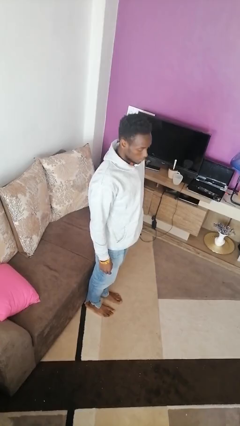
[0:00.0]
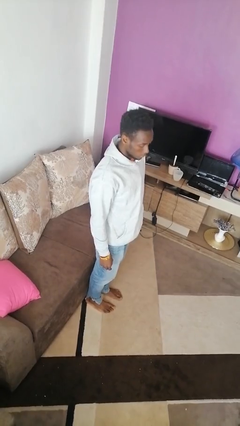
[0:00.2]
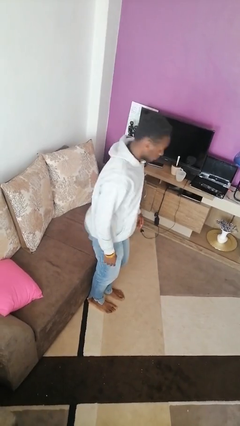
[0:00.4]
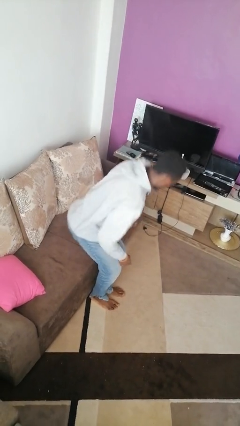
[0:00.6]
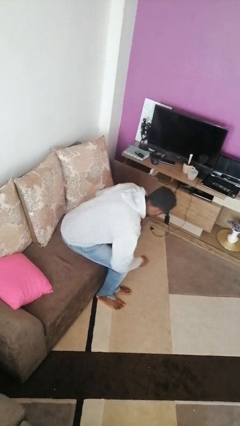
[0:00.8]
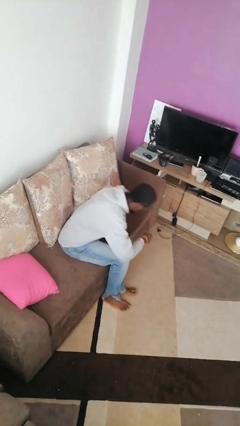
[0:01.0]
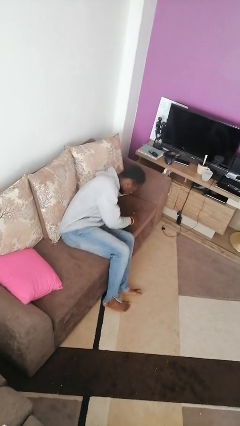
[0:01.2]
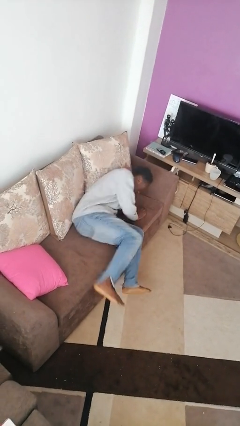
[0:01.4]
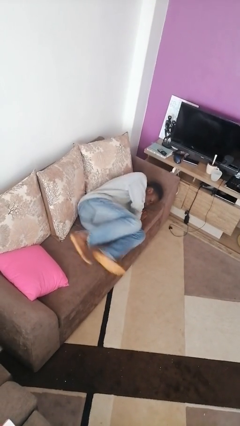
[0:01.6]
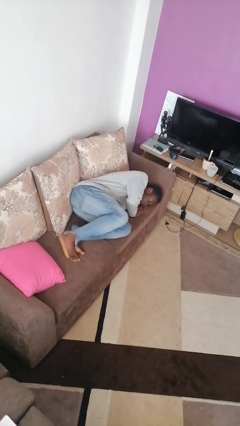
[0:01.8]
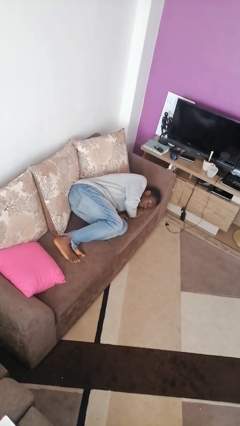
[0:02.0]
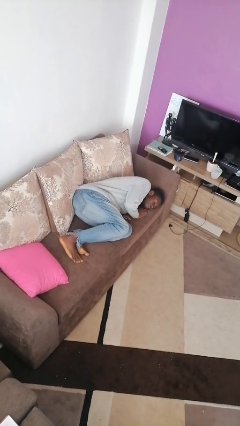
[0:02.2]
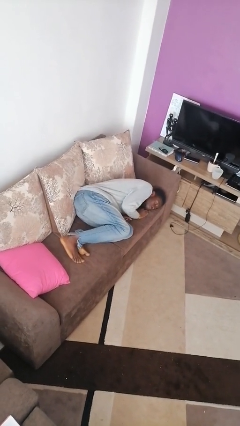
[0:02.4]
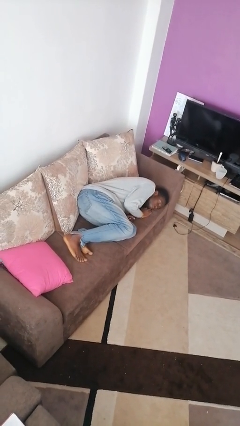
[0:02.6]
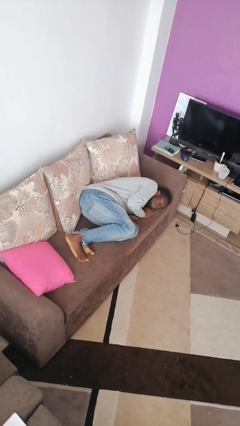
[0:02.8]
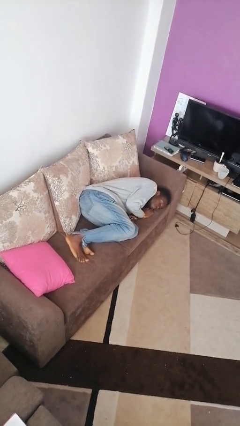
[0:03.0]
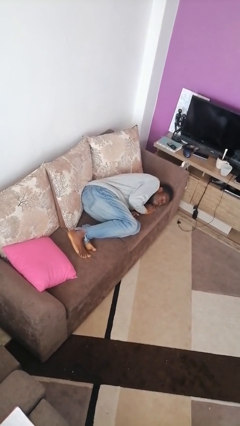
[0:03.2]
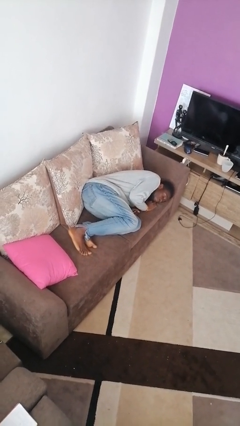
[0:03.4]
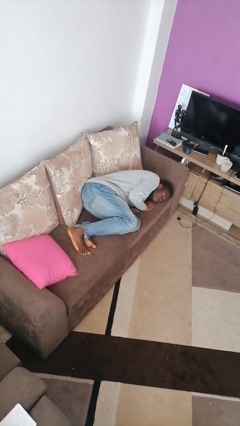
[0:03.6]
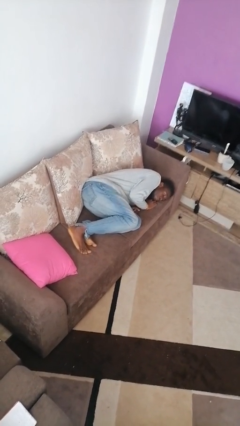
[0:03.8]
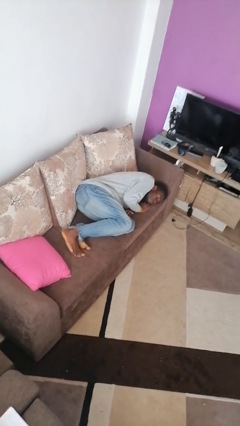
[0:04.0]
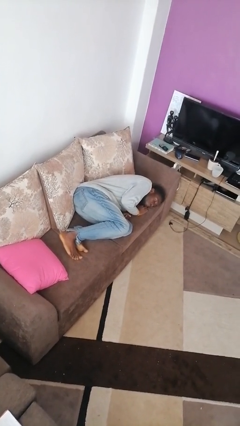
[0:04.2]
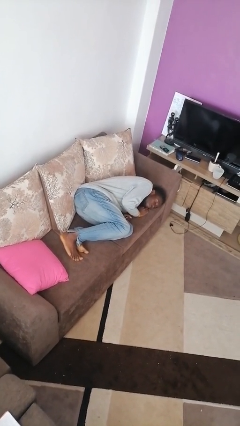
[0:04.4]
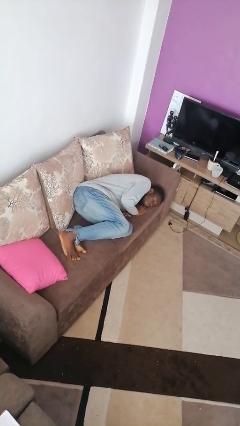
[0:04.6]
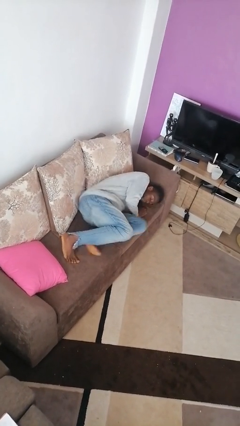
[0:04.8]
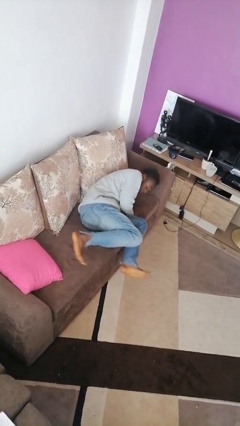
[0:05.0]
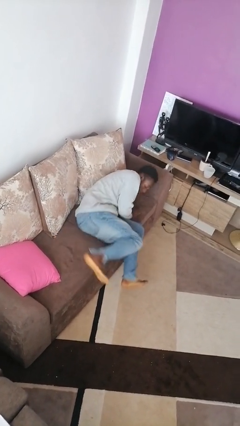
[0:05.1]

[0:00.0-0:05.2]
person lies down on couch

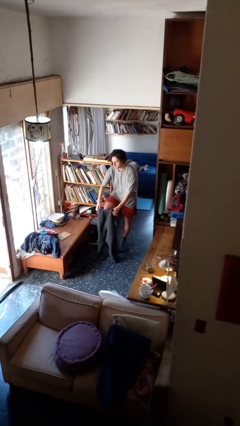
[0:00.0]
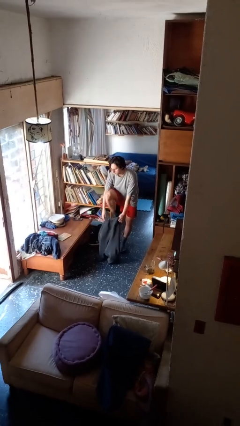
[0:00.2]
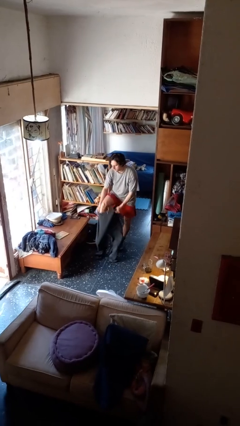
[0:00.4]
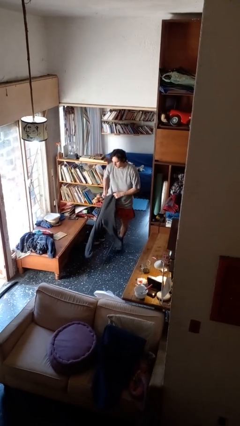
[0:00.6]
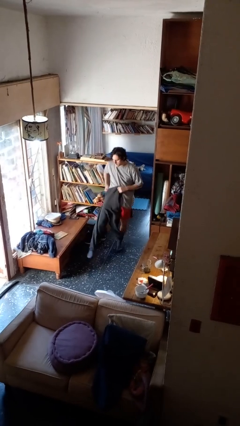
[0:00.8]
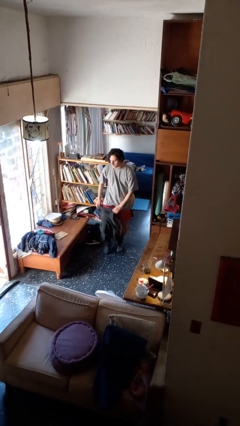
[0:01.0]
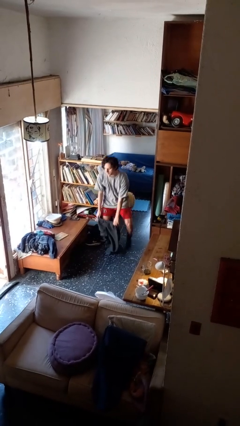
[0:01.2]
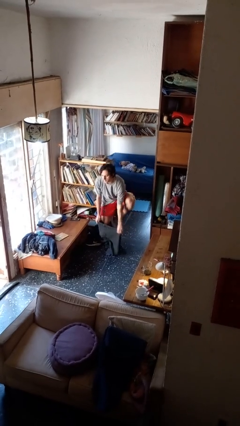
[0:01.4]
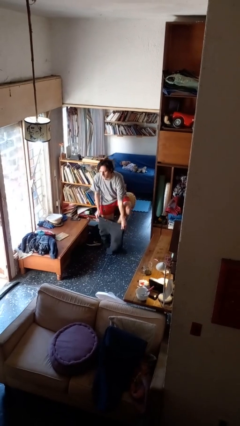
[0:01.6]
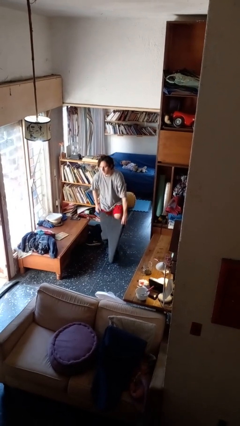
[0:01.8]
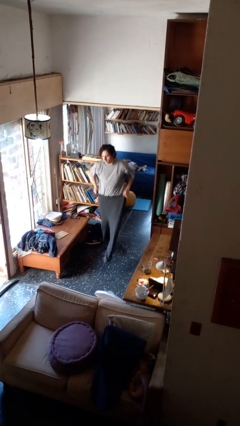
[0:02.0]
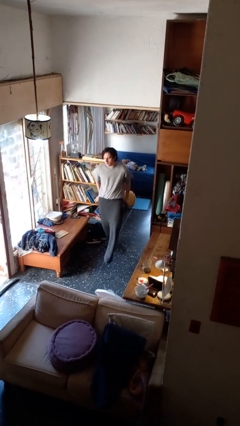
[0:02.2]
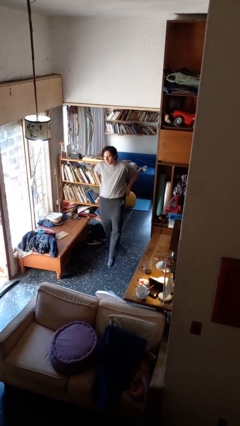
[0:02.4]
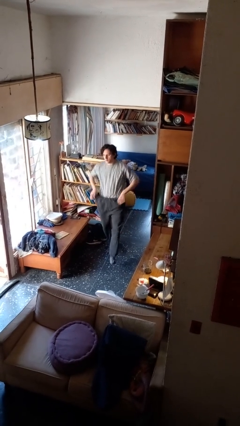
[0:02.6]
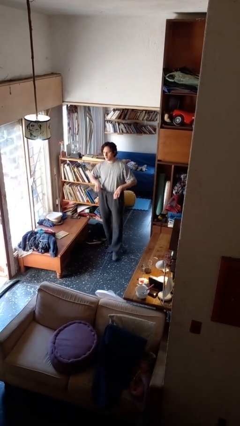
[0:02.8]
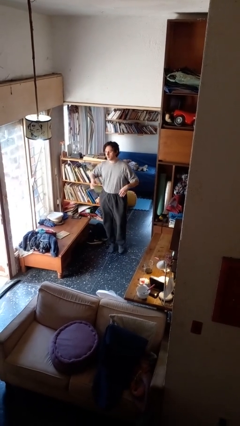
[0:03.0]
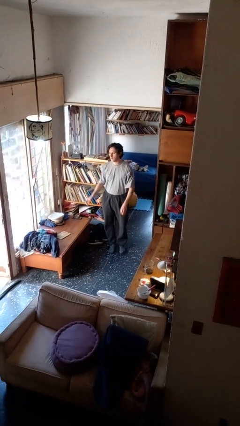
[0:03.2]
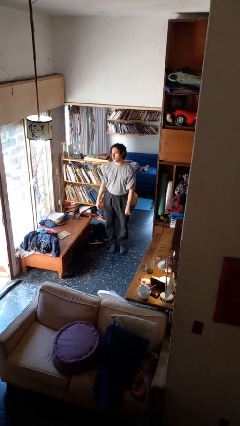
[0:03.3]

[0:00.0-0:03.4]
person puts on pants

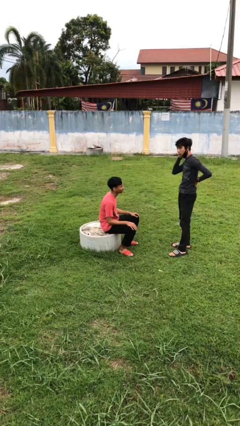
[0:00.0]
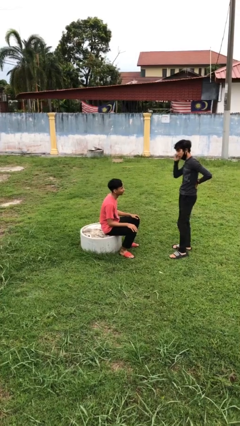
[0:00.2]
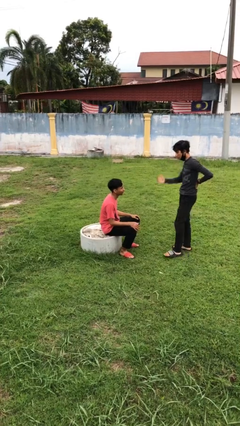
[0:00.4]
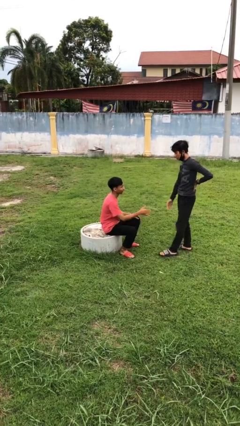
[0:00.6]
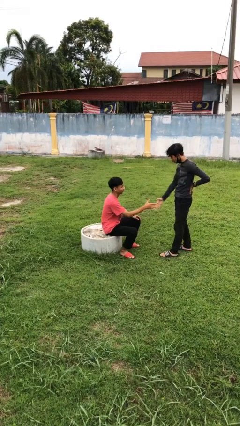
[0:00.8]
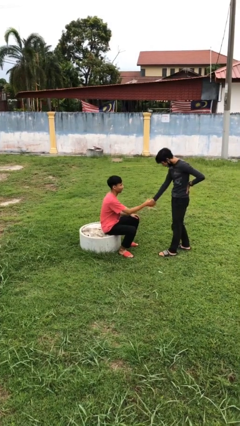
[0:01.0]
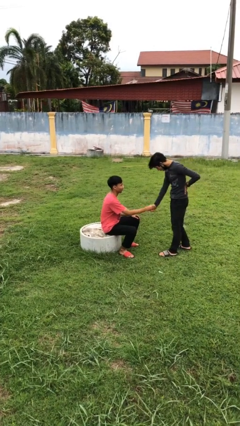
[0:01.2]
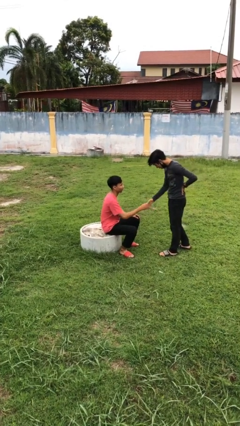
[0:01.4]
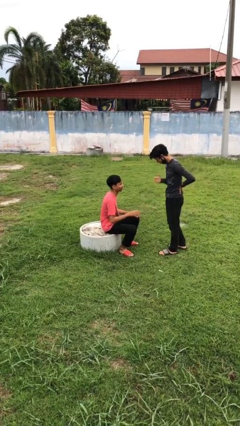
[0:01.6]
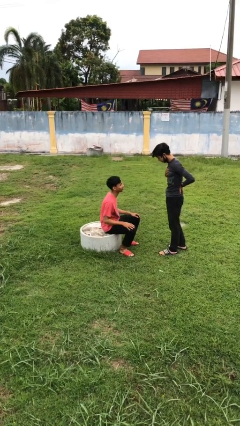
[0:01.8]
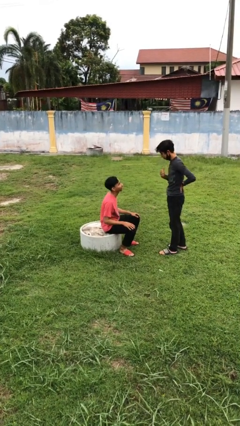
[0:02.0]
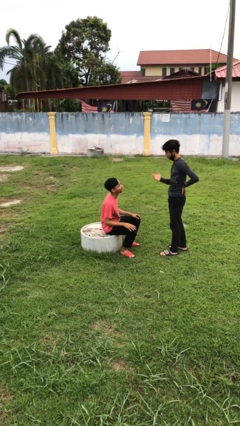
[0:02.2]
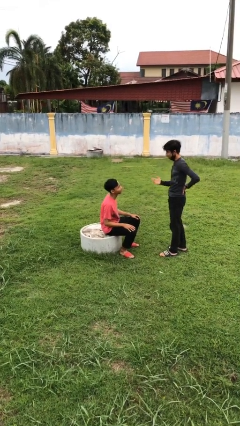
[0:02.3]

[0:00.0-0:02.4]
person shakes hand

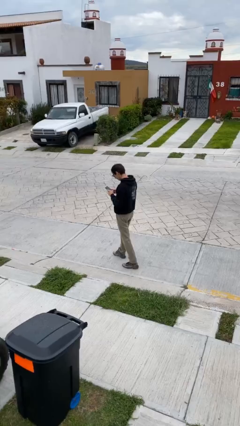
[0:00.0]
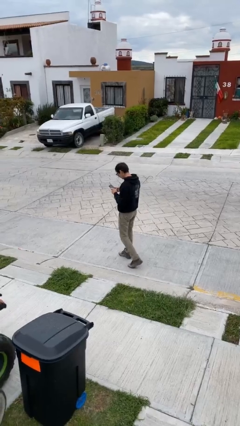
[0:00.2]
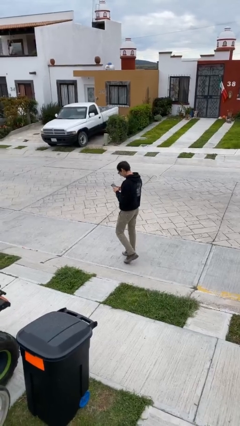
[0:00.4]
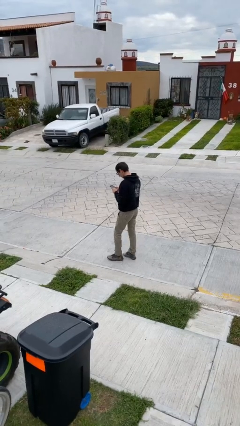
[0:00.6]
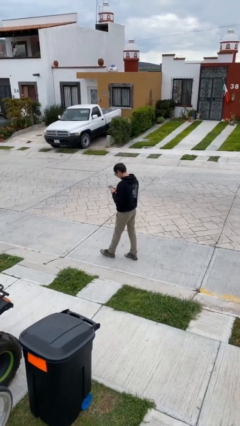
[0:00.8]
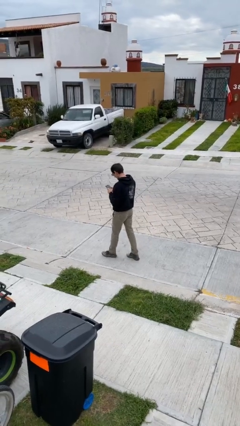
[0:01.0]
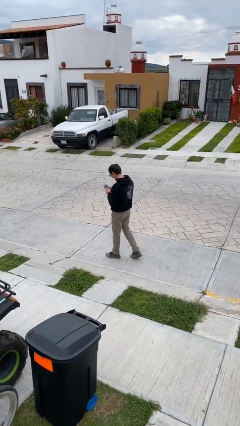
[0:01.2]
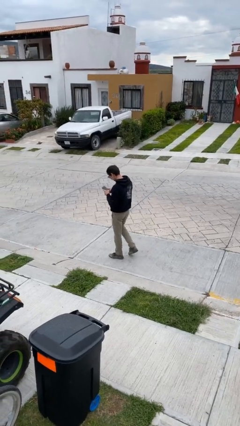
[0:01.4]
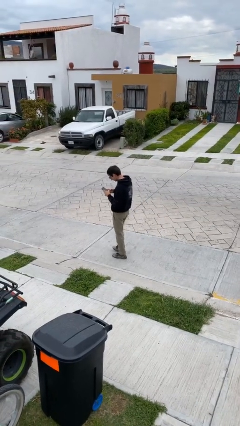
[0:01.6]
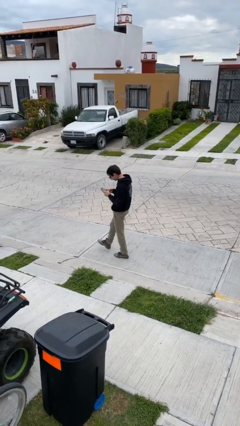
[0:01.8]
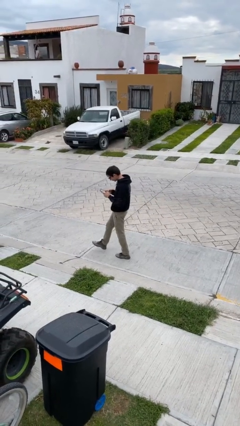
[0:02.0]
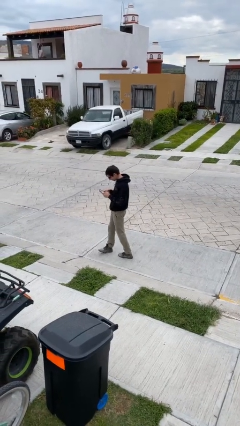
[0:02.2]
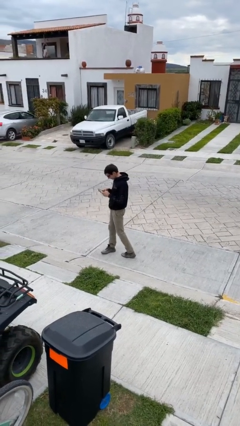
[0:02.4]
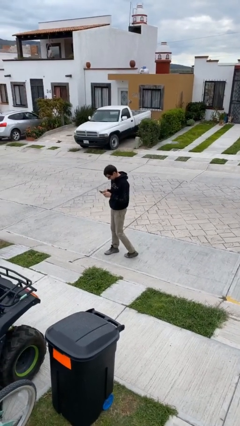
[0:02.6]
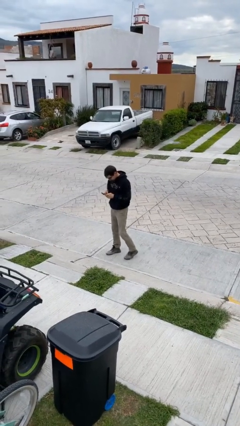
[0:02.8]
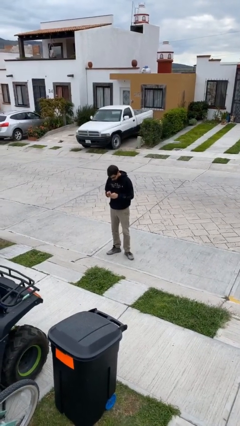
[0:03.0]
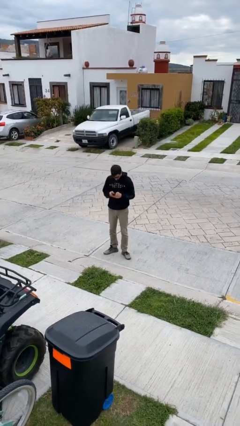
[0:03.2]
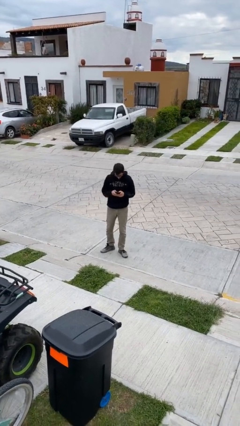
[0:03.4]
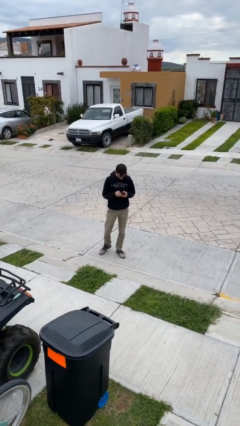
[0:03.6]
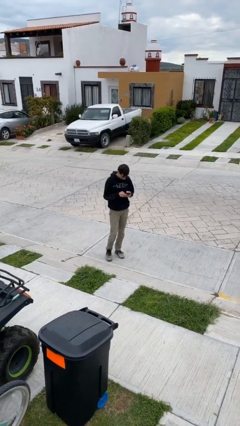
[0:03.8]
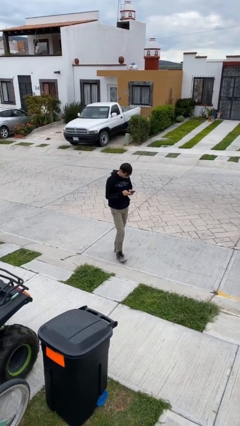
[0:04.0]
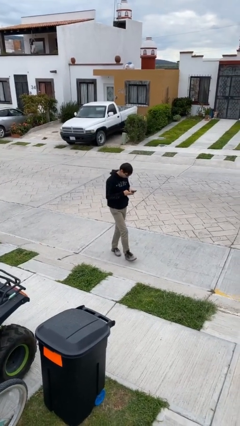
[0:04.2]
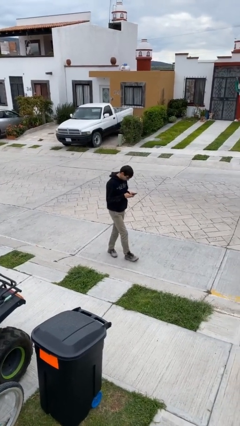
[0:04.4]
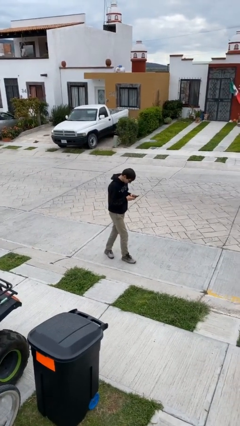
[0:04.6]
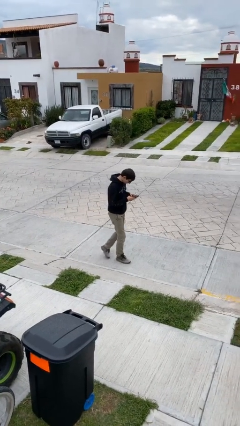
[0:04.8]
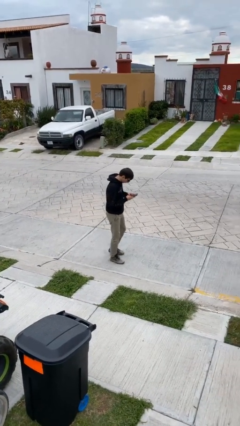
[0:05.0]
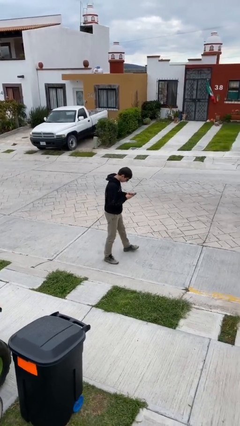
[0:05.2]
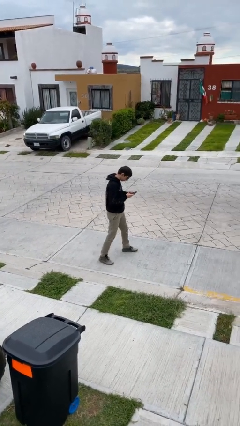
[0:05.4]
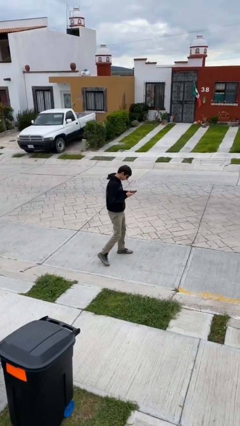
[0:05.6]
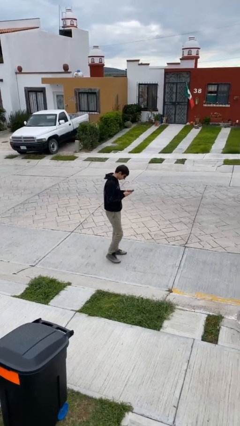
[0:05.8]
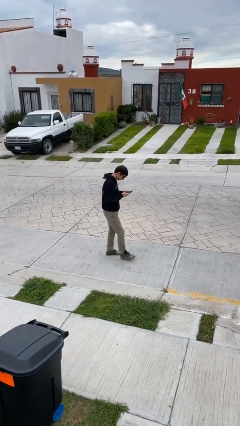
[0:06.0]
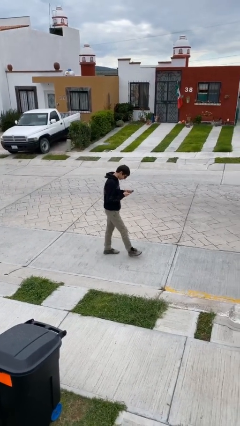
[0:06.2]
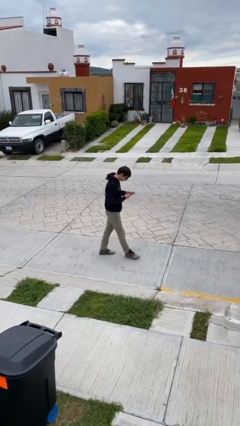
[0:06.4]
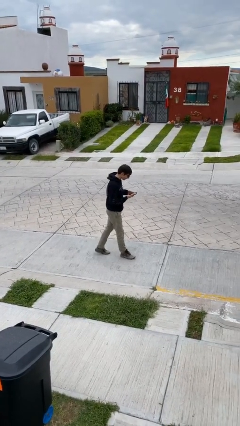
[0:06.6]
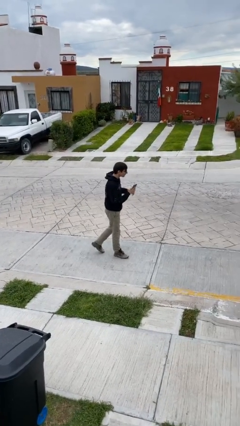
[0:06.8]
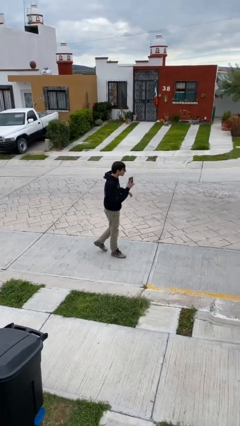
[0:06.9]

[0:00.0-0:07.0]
person texts on phone
